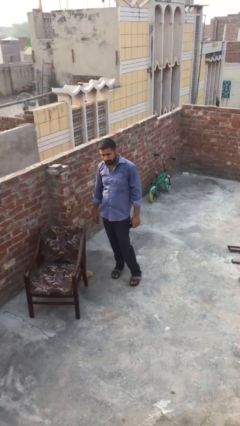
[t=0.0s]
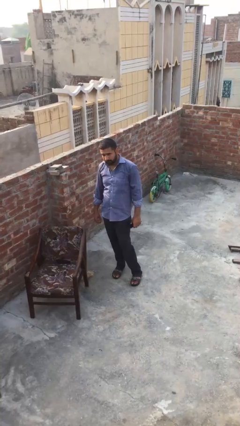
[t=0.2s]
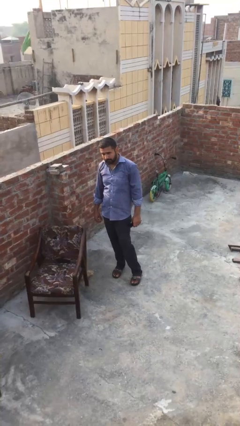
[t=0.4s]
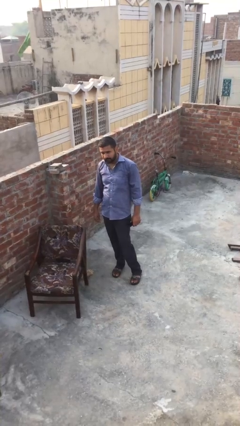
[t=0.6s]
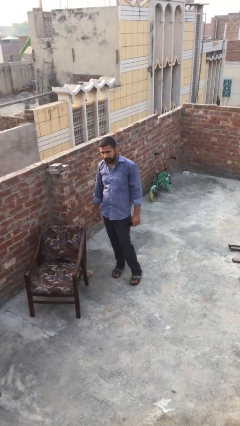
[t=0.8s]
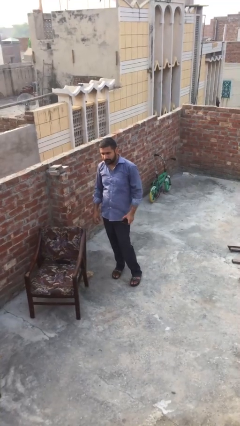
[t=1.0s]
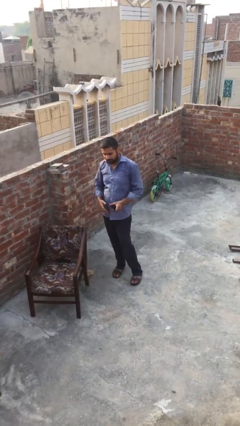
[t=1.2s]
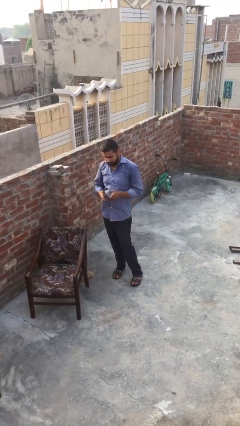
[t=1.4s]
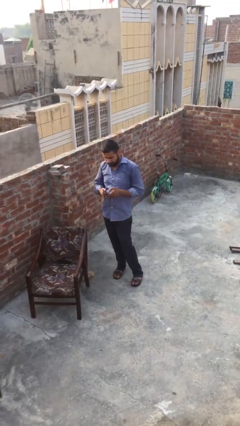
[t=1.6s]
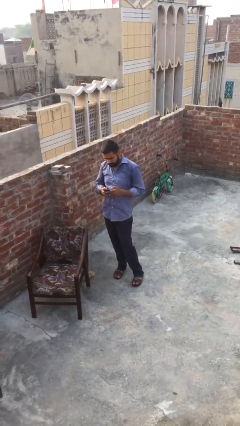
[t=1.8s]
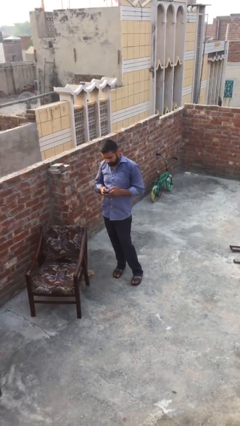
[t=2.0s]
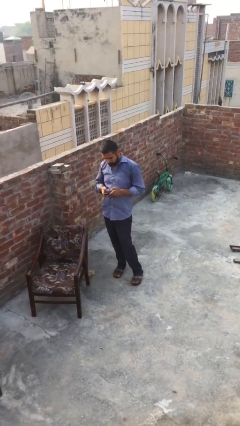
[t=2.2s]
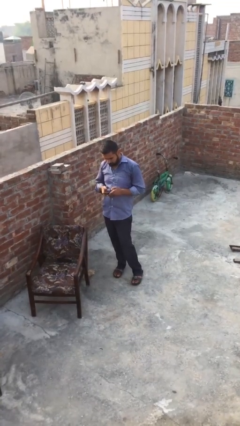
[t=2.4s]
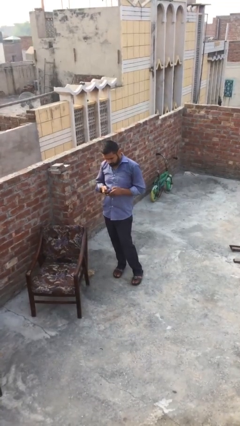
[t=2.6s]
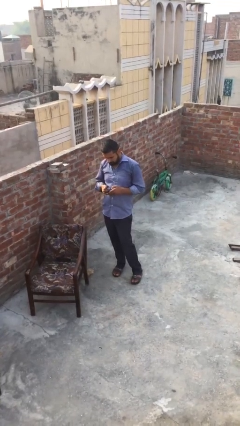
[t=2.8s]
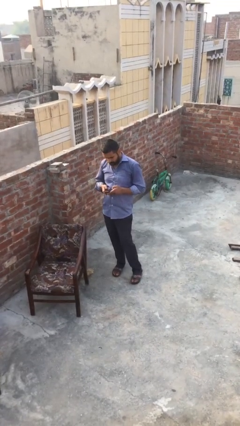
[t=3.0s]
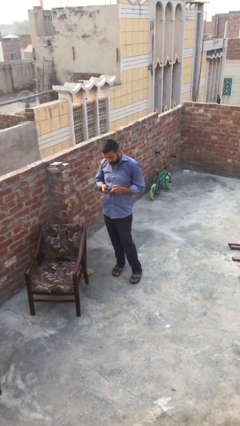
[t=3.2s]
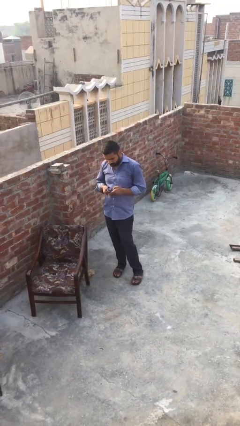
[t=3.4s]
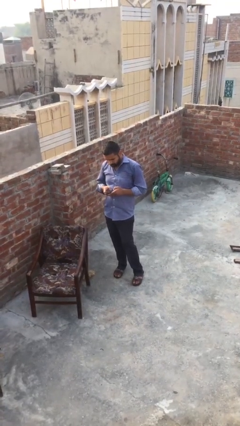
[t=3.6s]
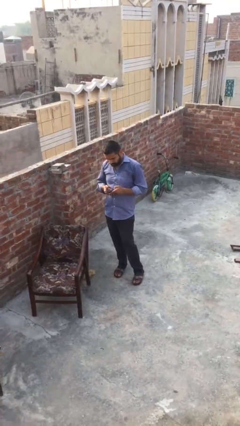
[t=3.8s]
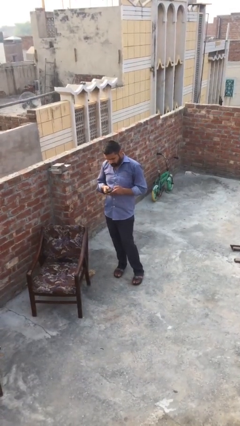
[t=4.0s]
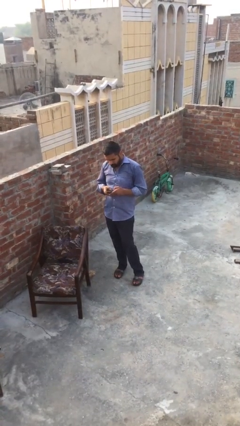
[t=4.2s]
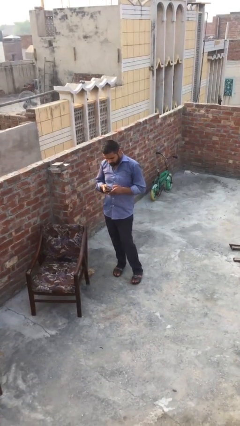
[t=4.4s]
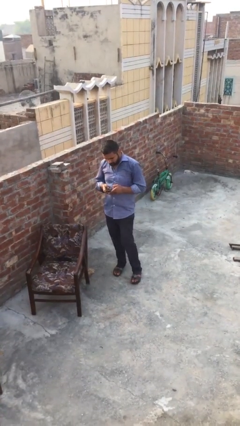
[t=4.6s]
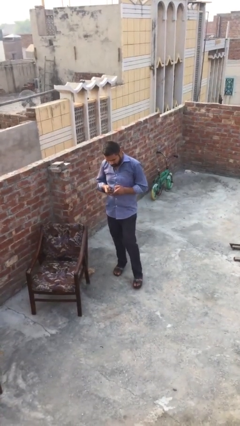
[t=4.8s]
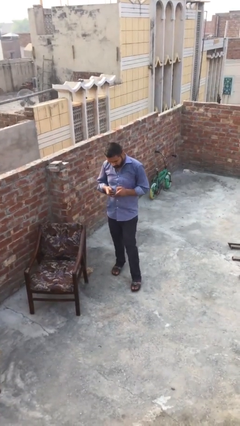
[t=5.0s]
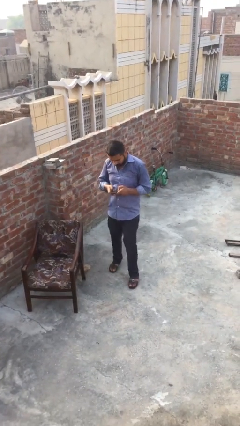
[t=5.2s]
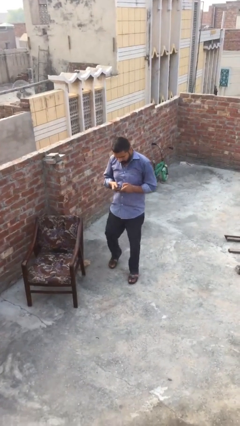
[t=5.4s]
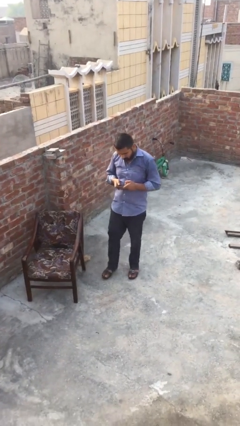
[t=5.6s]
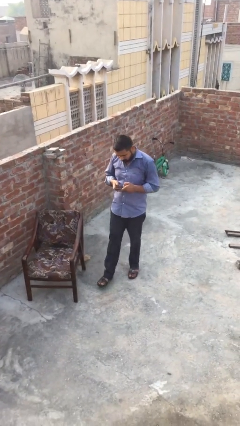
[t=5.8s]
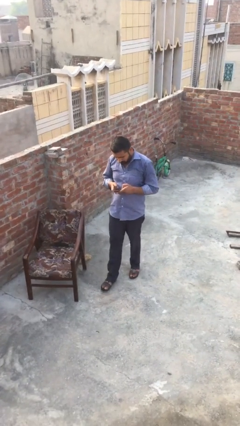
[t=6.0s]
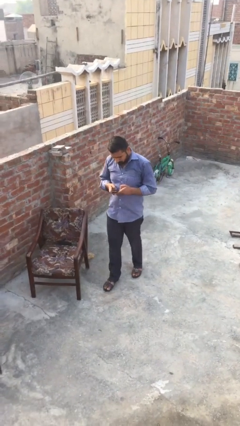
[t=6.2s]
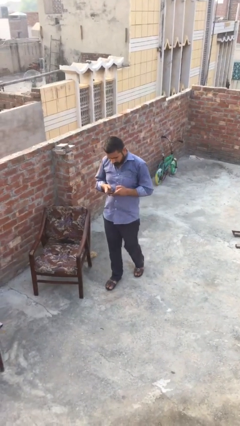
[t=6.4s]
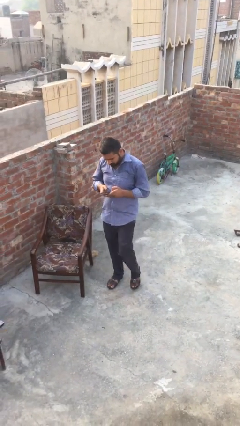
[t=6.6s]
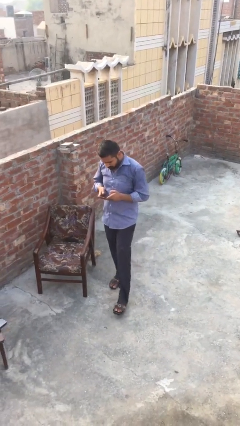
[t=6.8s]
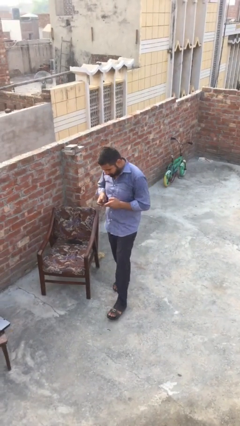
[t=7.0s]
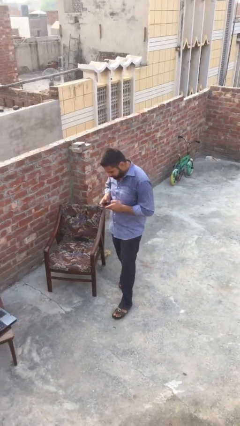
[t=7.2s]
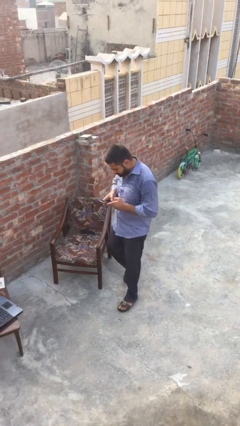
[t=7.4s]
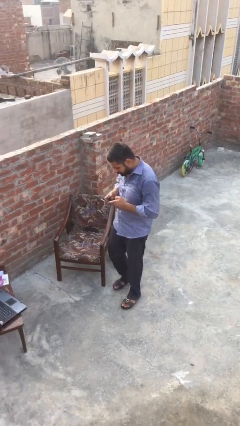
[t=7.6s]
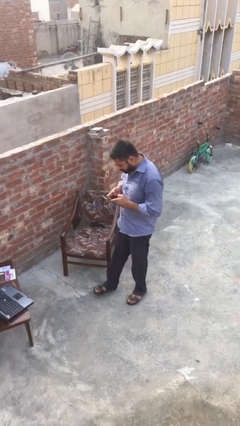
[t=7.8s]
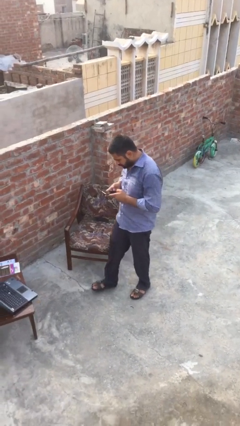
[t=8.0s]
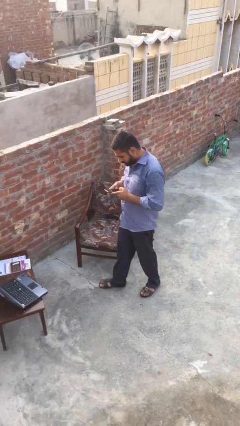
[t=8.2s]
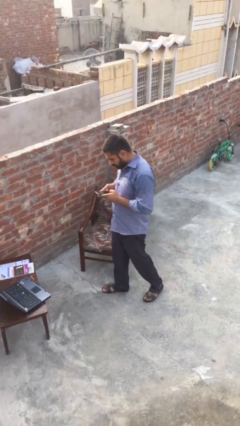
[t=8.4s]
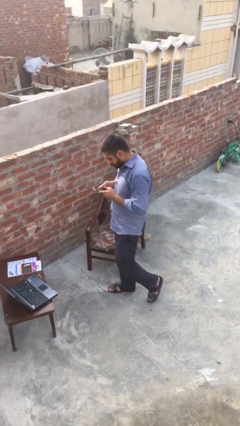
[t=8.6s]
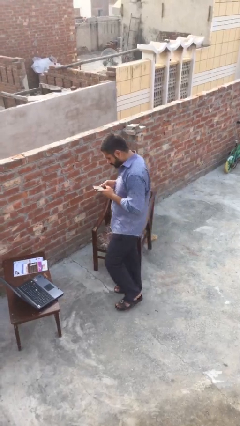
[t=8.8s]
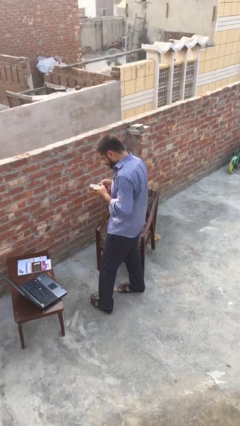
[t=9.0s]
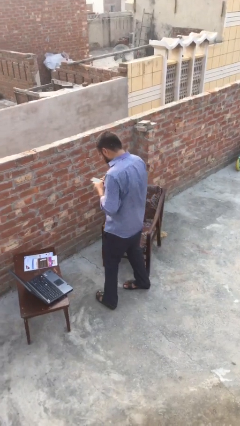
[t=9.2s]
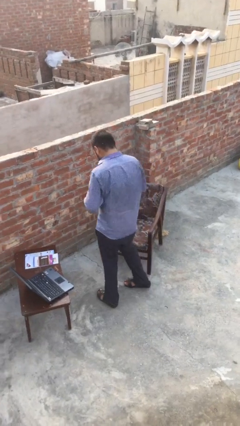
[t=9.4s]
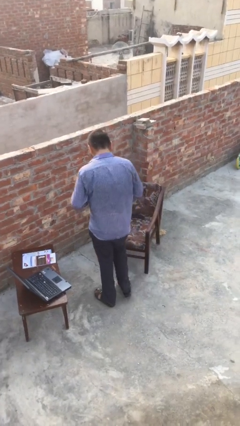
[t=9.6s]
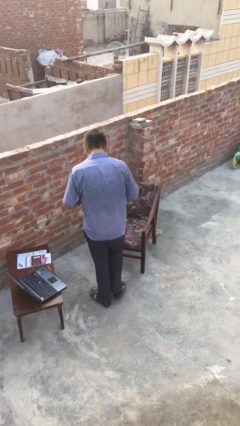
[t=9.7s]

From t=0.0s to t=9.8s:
person texts on phone

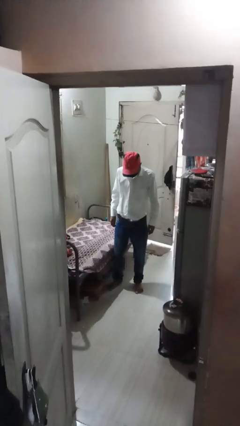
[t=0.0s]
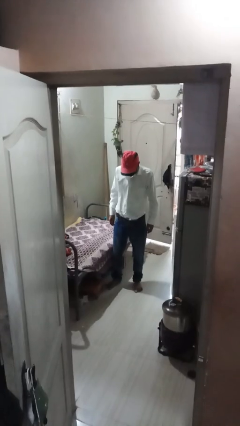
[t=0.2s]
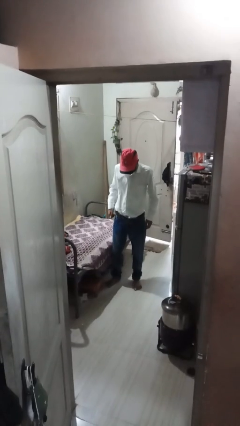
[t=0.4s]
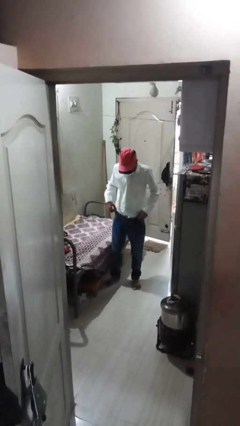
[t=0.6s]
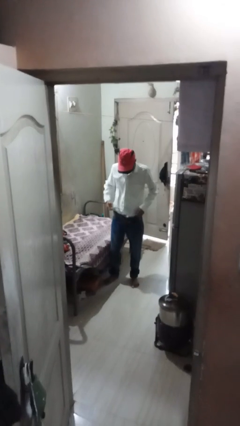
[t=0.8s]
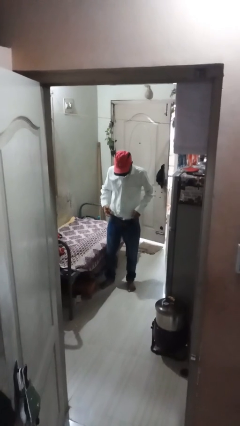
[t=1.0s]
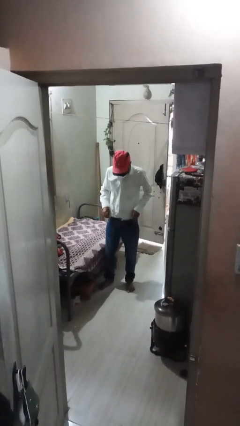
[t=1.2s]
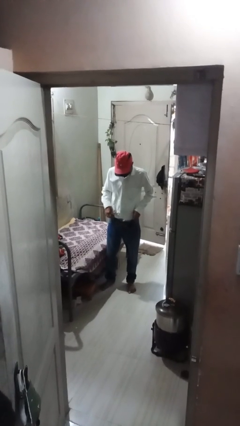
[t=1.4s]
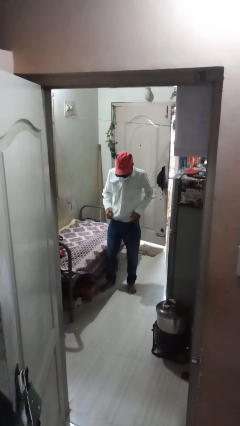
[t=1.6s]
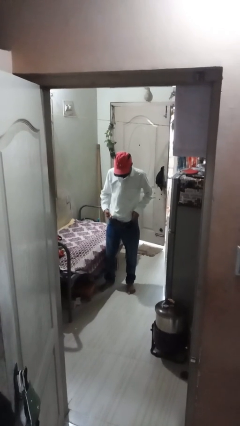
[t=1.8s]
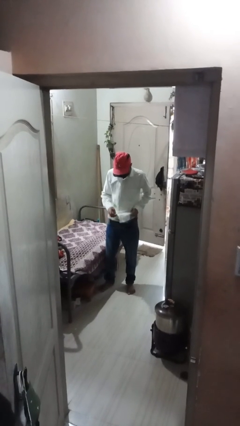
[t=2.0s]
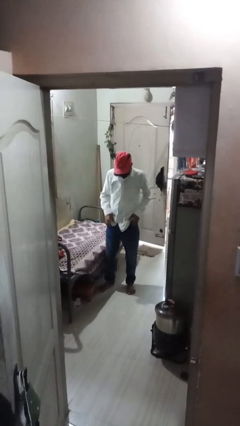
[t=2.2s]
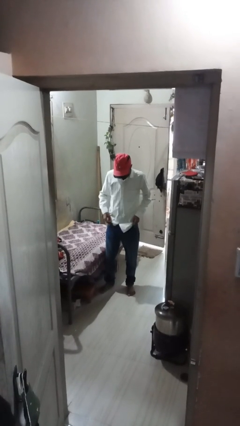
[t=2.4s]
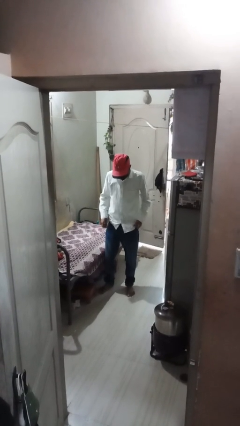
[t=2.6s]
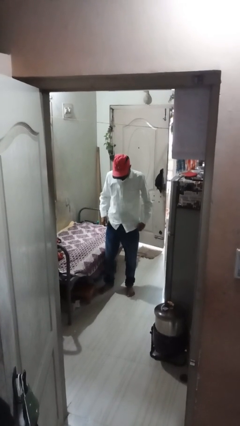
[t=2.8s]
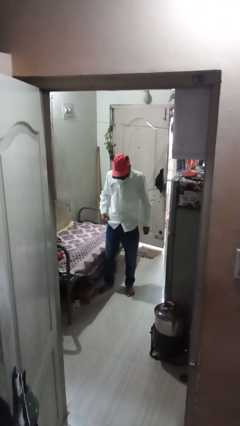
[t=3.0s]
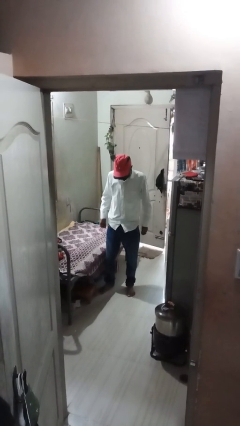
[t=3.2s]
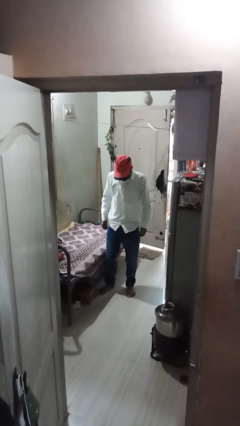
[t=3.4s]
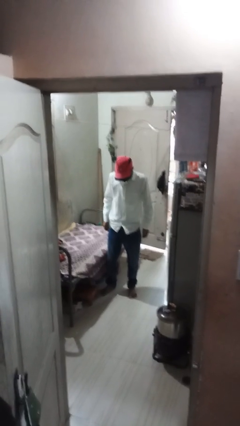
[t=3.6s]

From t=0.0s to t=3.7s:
person untucks shirt

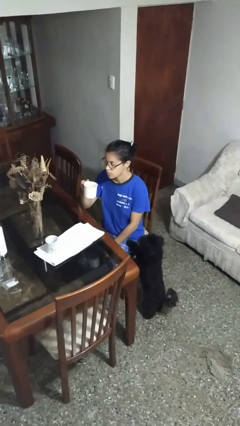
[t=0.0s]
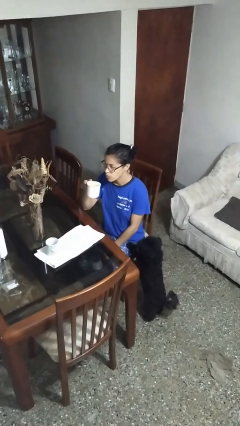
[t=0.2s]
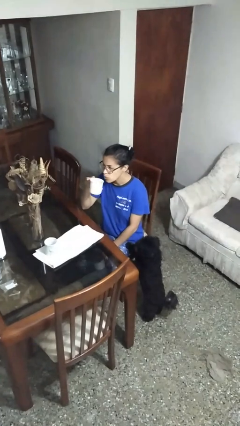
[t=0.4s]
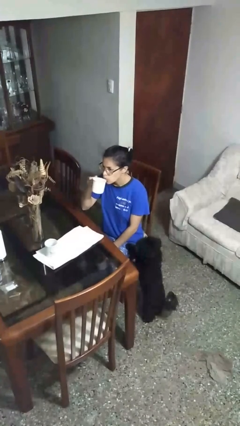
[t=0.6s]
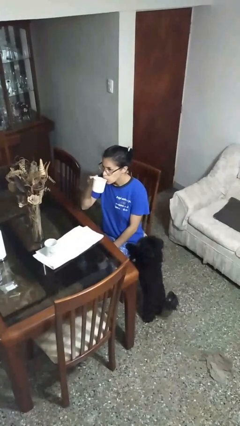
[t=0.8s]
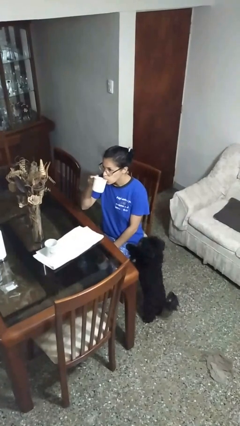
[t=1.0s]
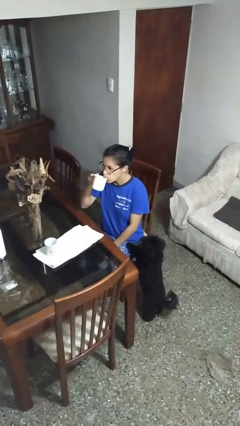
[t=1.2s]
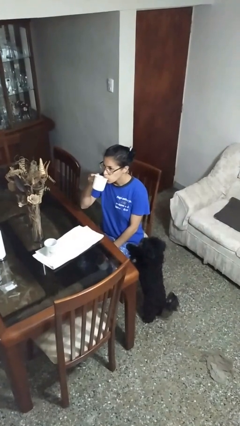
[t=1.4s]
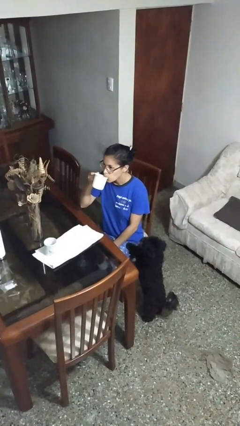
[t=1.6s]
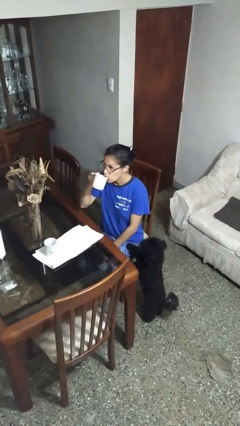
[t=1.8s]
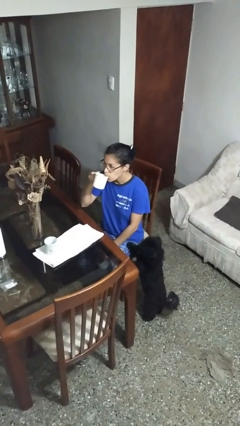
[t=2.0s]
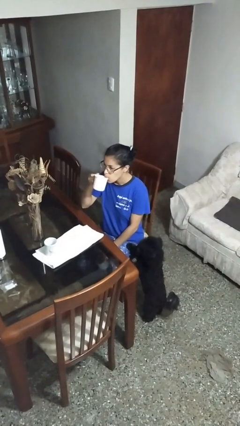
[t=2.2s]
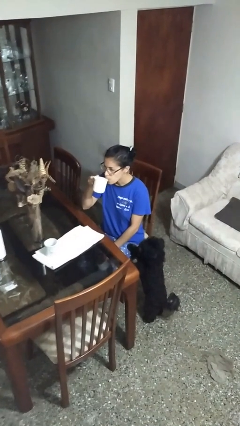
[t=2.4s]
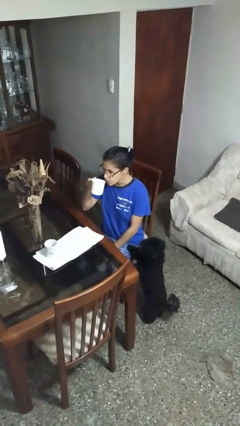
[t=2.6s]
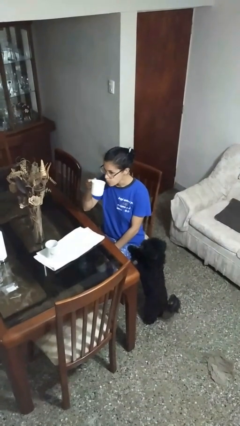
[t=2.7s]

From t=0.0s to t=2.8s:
person drinks from mug

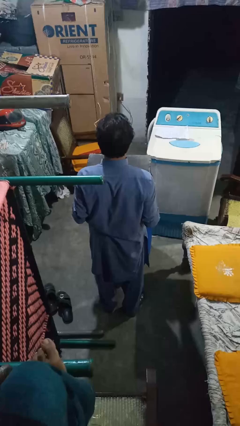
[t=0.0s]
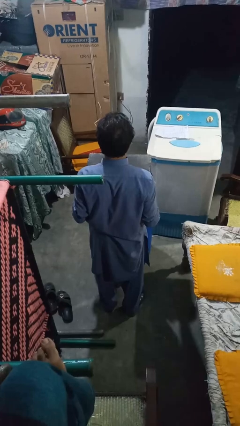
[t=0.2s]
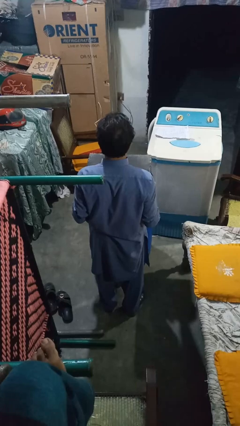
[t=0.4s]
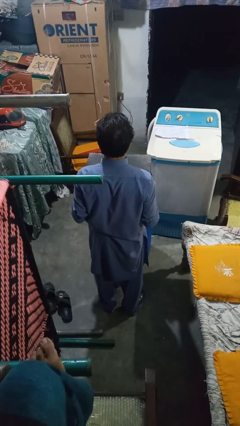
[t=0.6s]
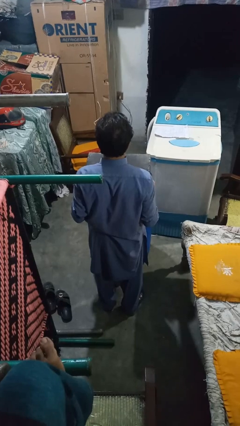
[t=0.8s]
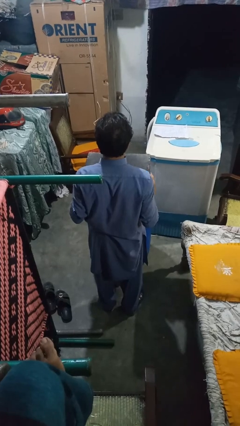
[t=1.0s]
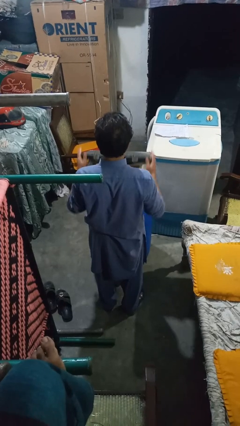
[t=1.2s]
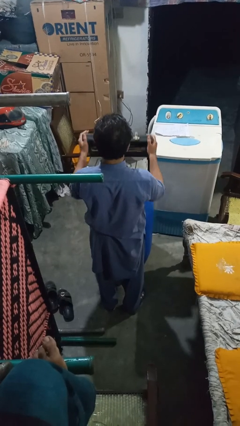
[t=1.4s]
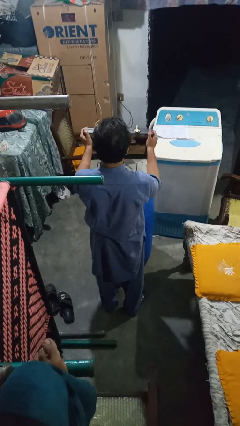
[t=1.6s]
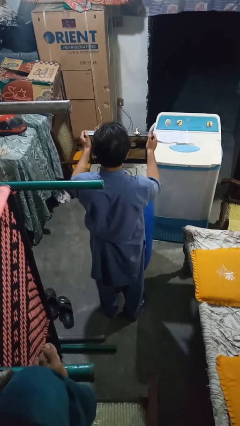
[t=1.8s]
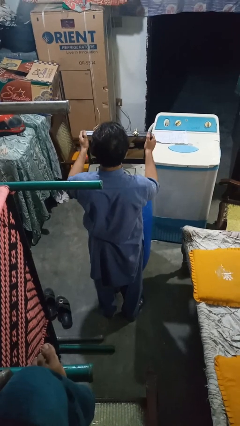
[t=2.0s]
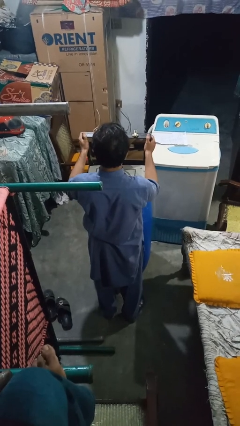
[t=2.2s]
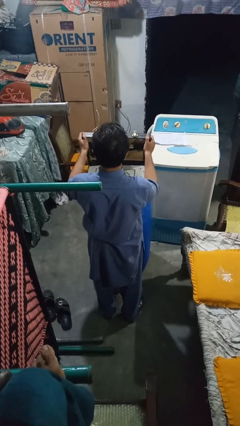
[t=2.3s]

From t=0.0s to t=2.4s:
person opens suitcase
